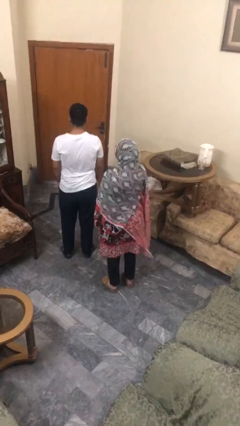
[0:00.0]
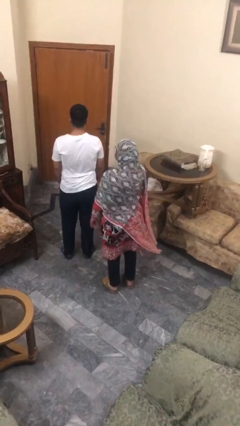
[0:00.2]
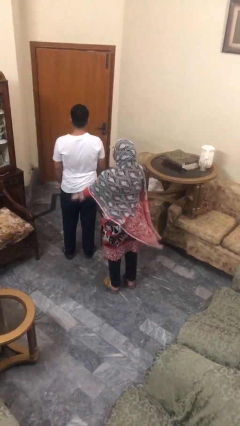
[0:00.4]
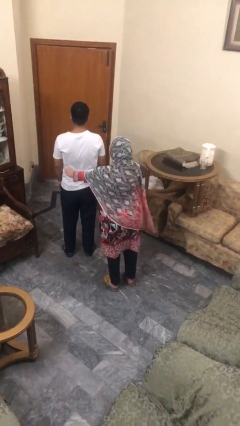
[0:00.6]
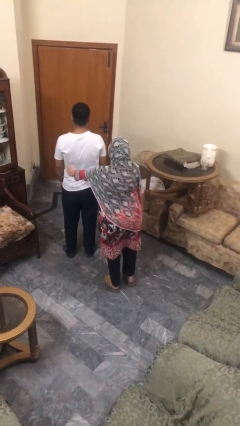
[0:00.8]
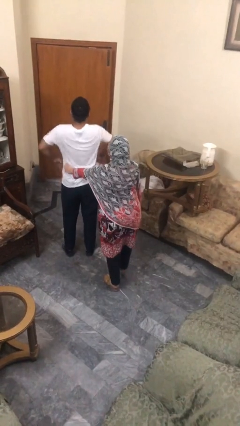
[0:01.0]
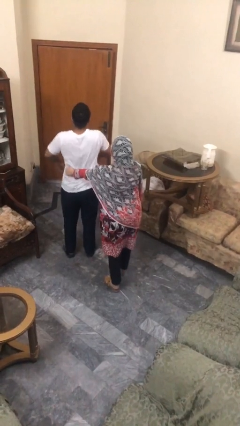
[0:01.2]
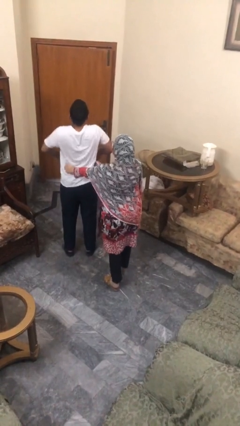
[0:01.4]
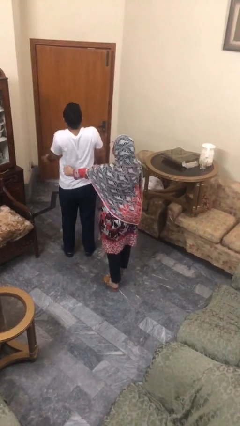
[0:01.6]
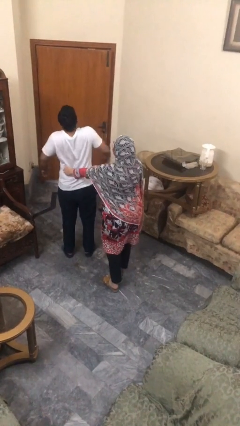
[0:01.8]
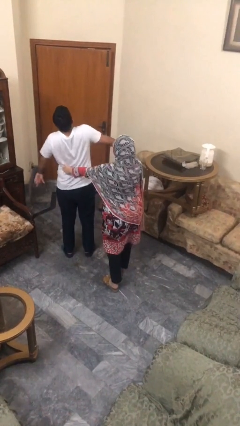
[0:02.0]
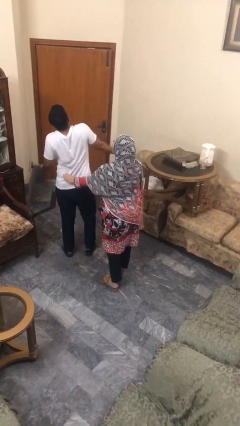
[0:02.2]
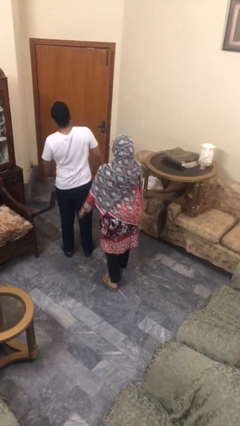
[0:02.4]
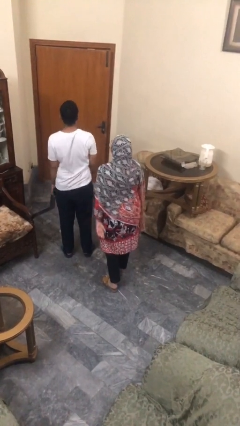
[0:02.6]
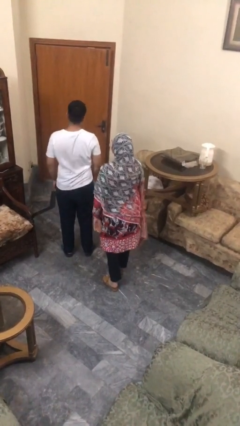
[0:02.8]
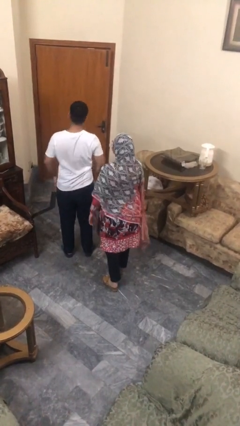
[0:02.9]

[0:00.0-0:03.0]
person tickles person

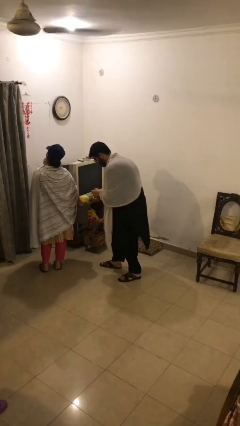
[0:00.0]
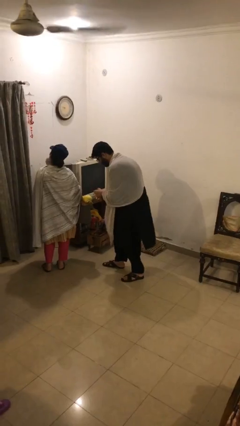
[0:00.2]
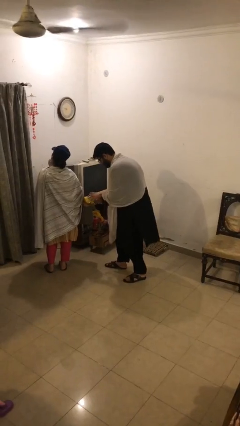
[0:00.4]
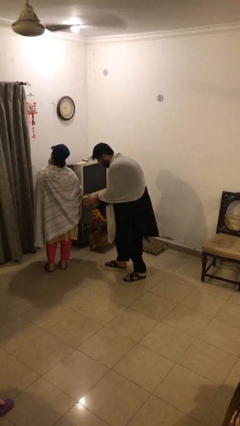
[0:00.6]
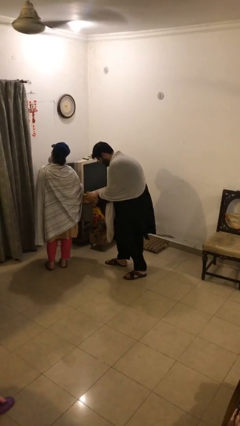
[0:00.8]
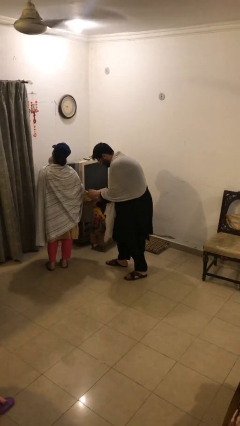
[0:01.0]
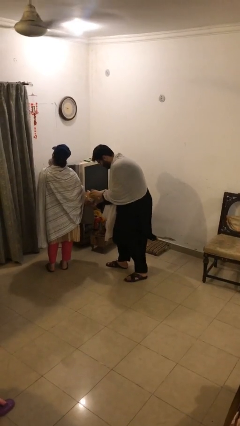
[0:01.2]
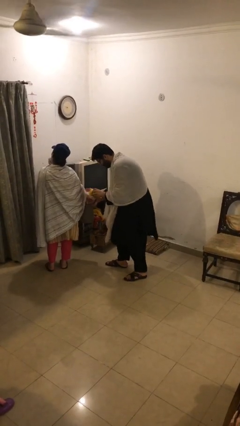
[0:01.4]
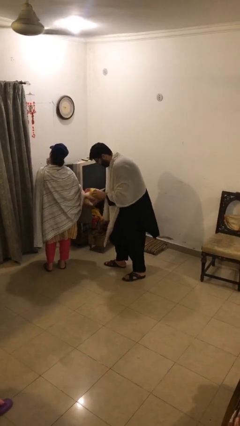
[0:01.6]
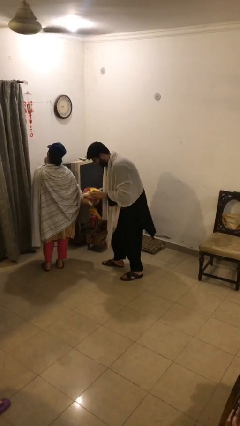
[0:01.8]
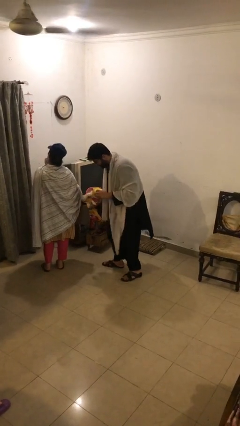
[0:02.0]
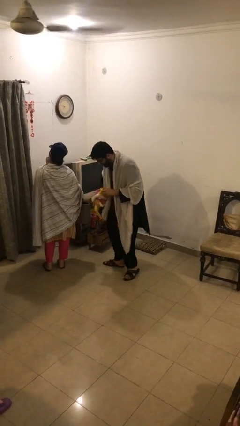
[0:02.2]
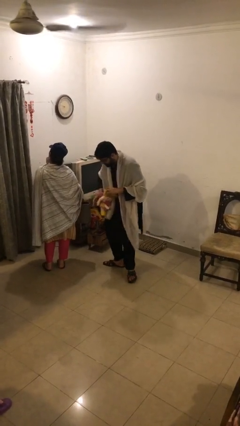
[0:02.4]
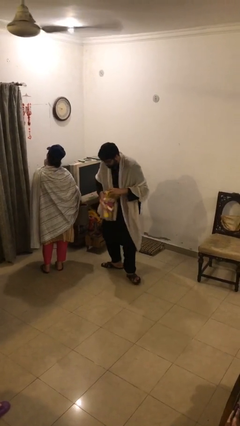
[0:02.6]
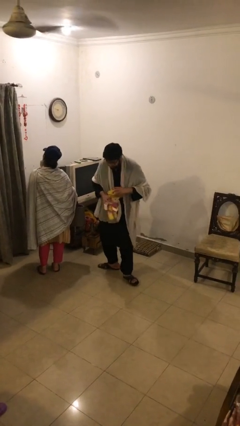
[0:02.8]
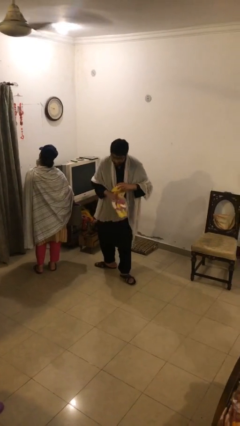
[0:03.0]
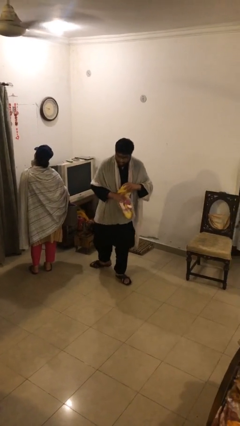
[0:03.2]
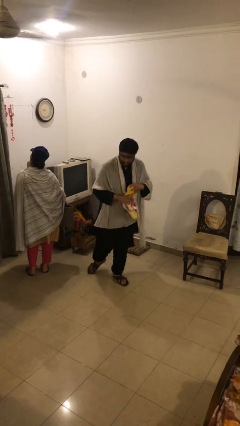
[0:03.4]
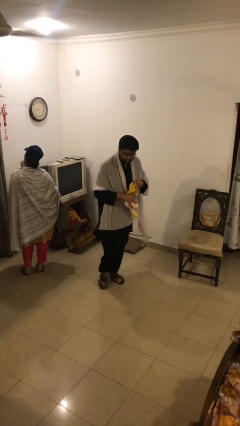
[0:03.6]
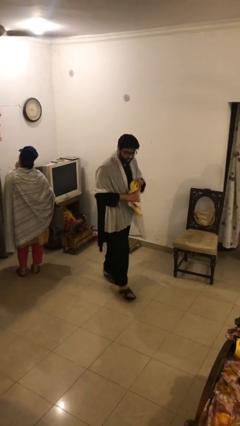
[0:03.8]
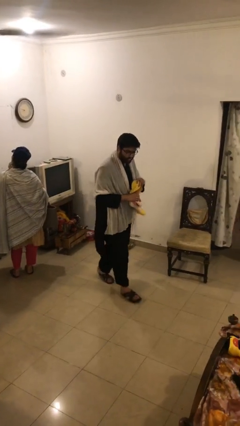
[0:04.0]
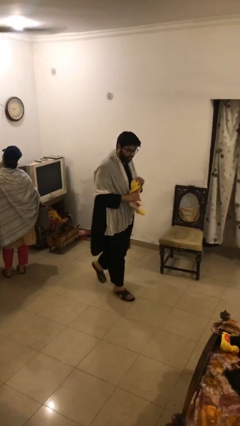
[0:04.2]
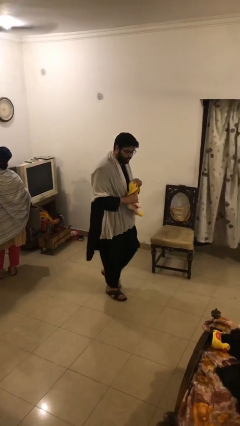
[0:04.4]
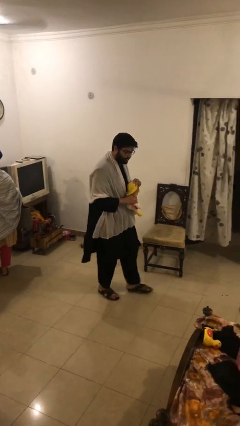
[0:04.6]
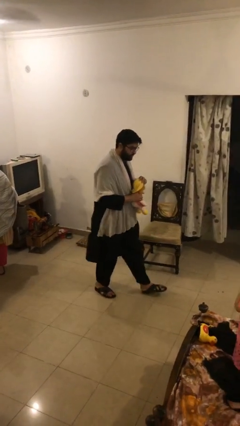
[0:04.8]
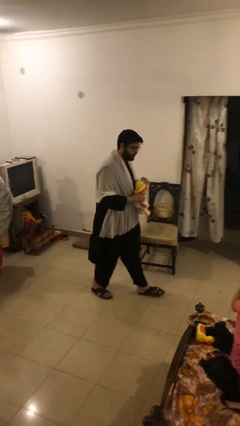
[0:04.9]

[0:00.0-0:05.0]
person steals object from person

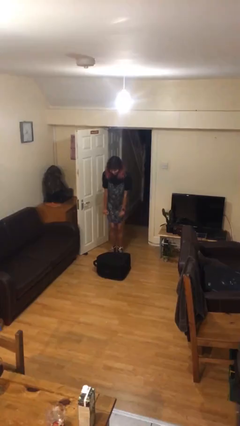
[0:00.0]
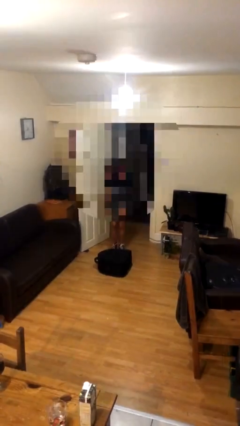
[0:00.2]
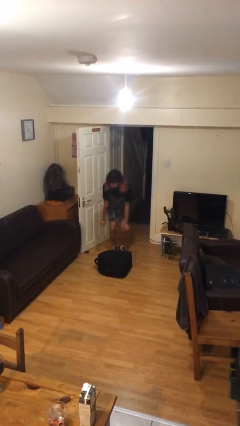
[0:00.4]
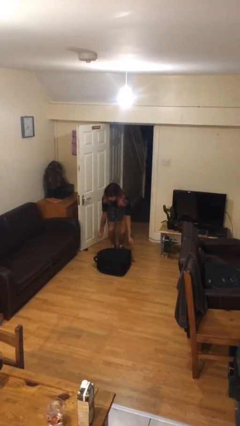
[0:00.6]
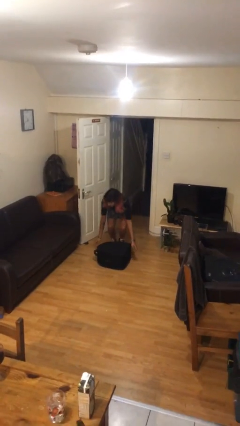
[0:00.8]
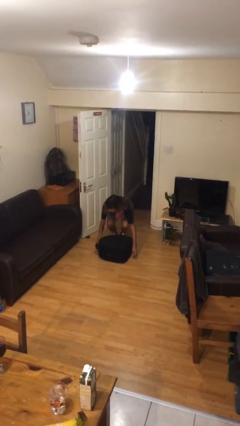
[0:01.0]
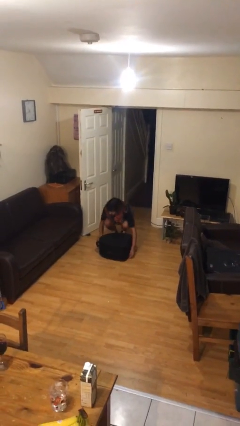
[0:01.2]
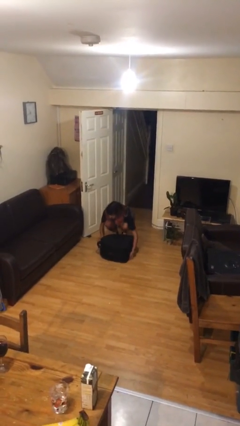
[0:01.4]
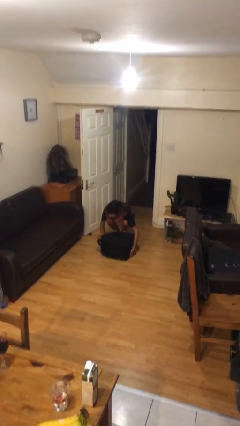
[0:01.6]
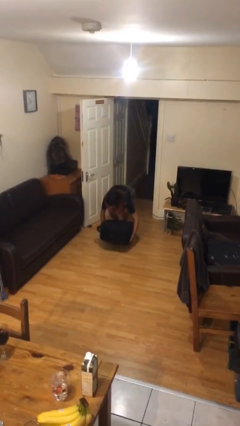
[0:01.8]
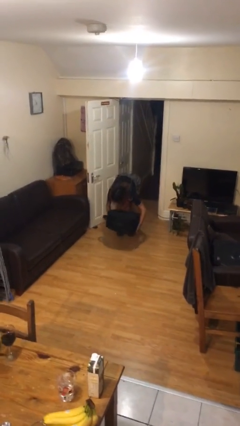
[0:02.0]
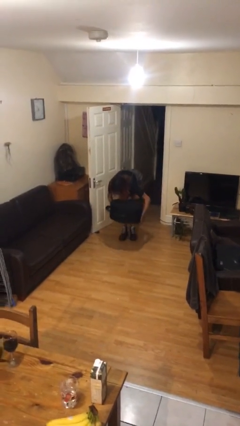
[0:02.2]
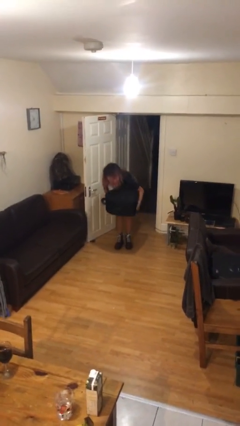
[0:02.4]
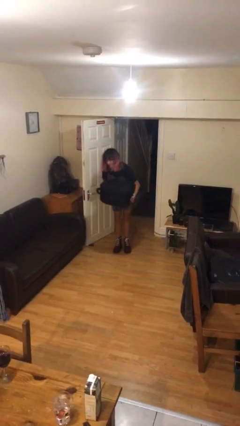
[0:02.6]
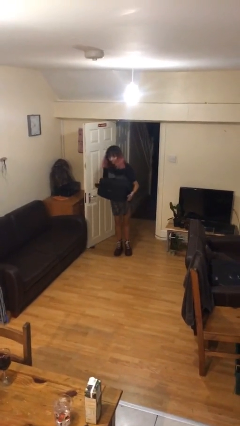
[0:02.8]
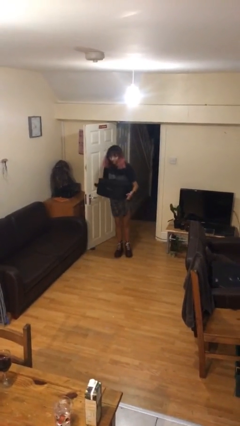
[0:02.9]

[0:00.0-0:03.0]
person picks up object from floor

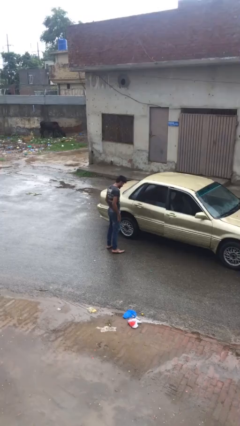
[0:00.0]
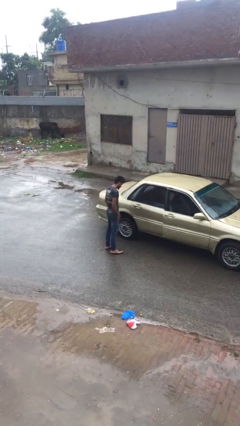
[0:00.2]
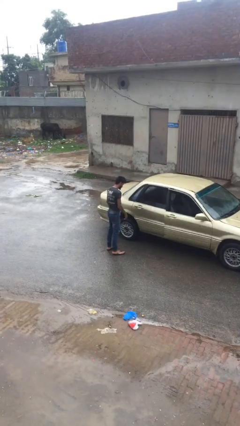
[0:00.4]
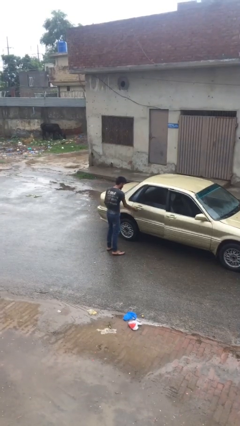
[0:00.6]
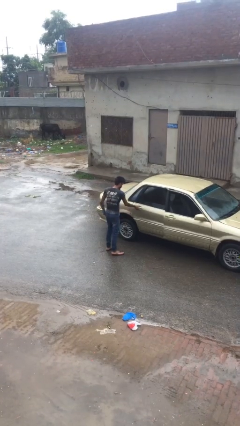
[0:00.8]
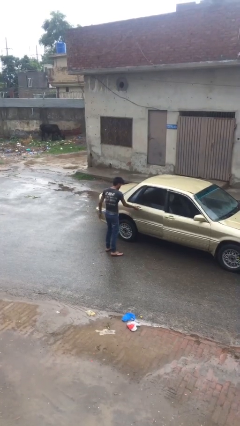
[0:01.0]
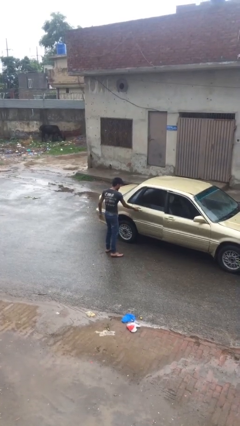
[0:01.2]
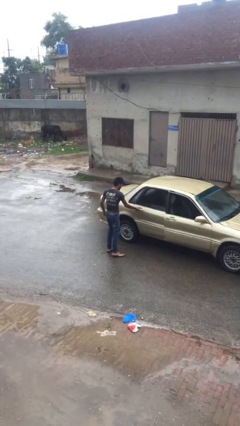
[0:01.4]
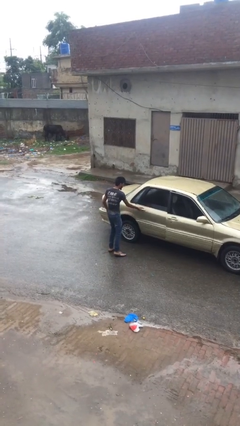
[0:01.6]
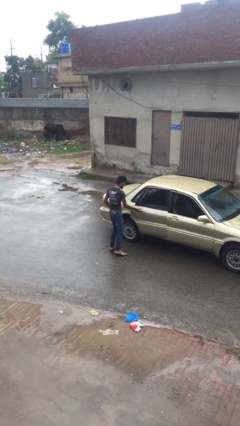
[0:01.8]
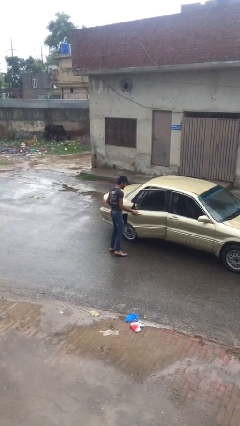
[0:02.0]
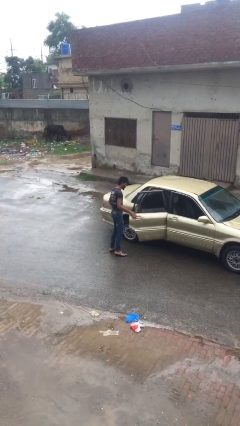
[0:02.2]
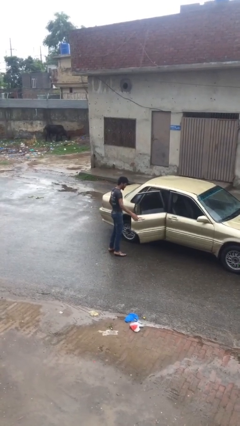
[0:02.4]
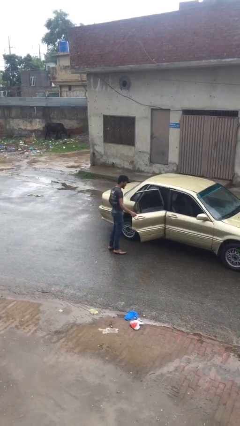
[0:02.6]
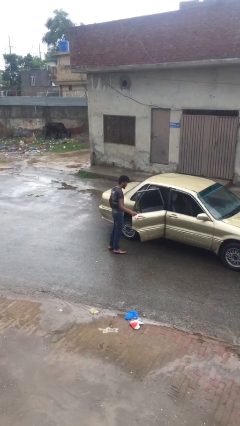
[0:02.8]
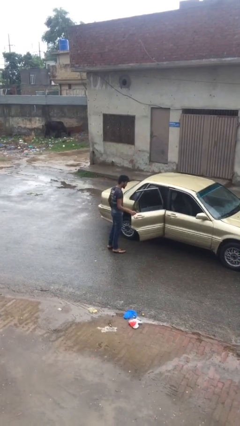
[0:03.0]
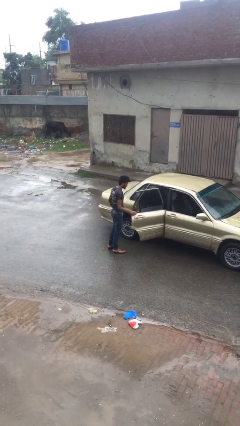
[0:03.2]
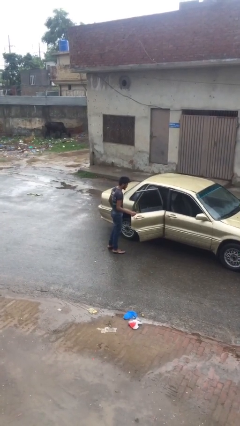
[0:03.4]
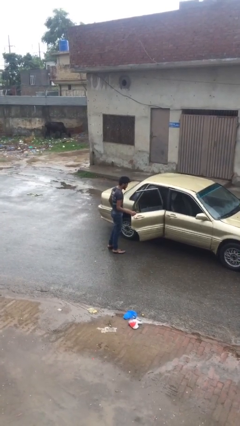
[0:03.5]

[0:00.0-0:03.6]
person opens car door

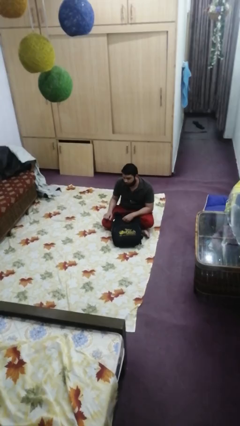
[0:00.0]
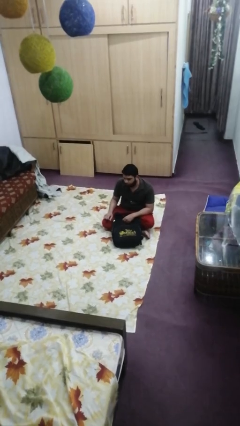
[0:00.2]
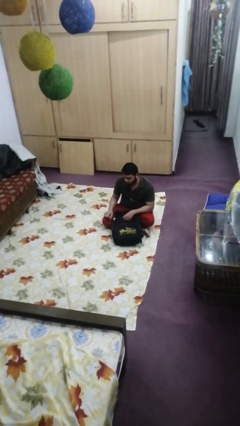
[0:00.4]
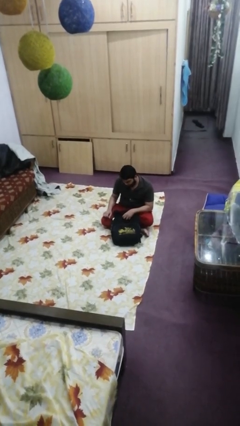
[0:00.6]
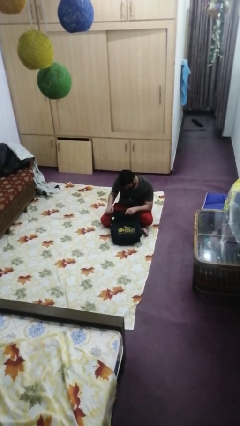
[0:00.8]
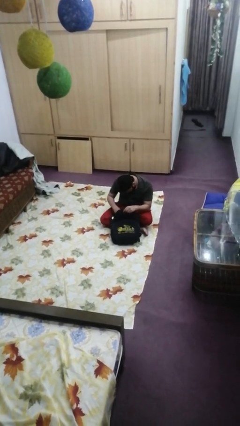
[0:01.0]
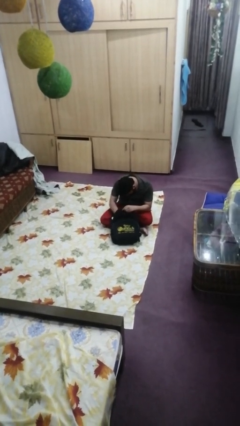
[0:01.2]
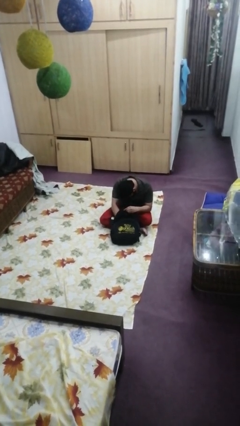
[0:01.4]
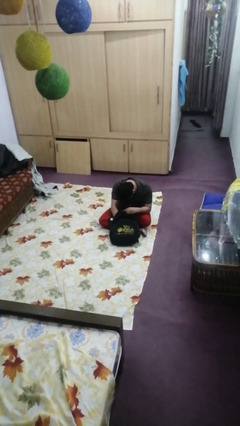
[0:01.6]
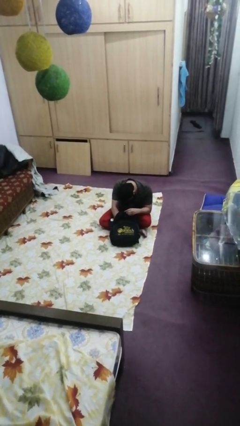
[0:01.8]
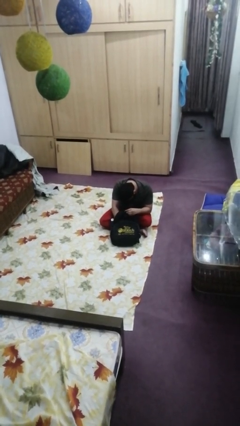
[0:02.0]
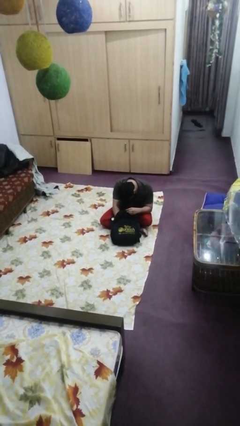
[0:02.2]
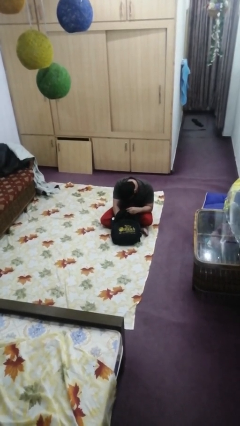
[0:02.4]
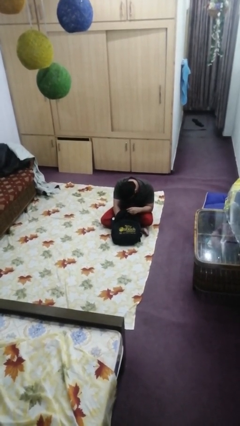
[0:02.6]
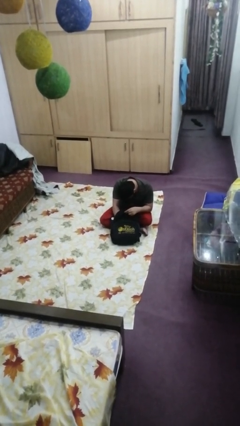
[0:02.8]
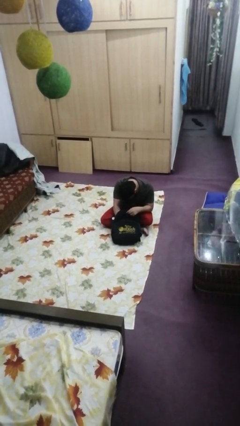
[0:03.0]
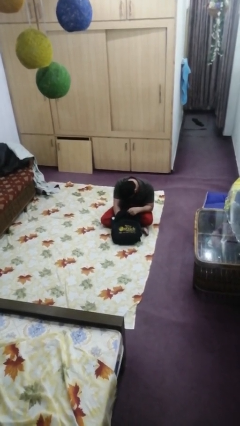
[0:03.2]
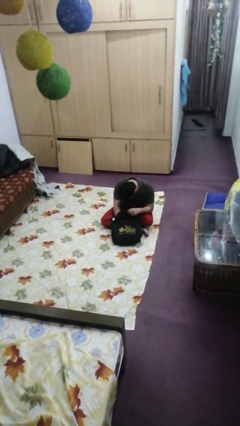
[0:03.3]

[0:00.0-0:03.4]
person searches in backpack
